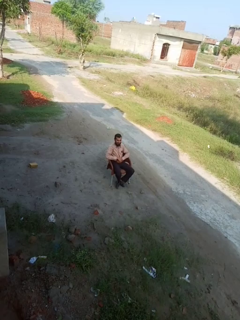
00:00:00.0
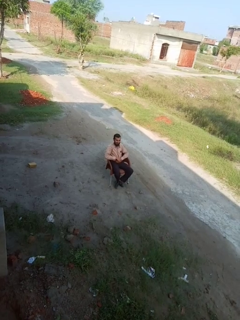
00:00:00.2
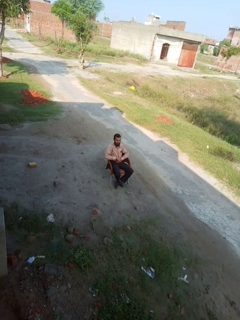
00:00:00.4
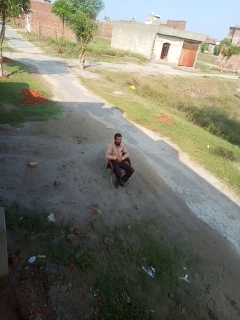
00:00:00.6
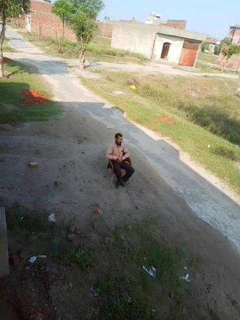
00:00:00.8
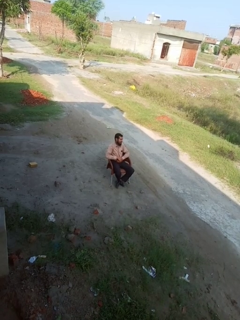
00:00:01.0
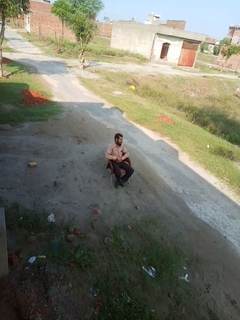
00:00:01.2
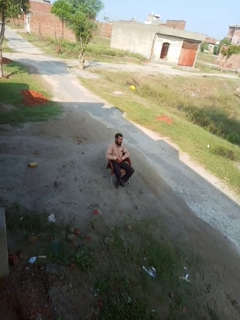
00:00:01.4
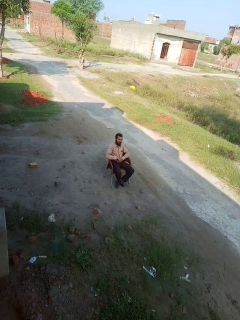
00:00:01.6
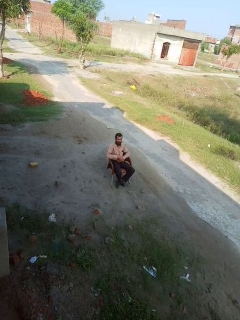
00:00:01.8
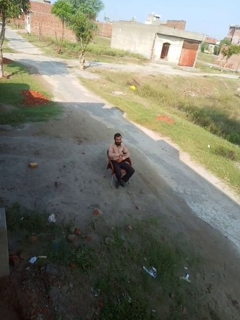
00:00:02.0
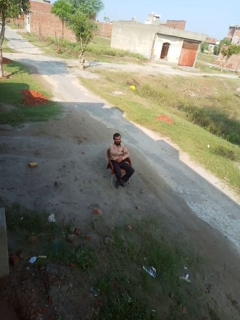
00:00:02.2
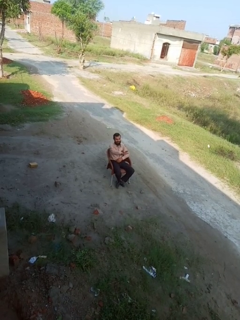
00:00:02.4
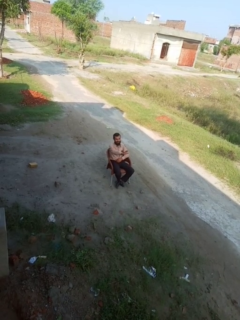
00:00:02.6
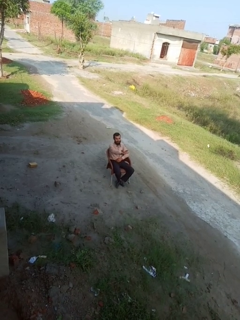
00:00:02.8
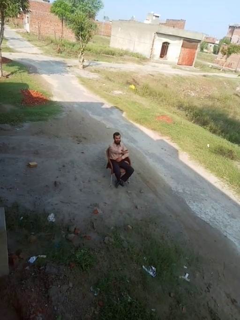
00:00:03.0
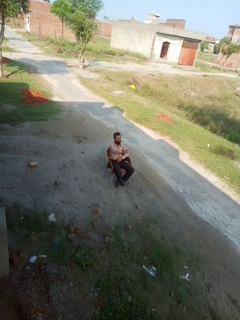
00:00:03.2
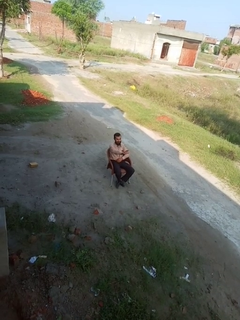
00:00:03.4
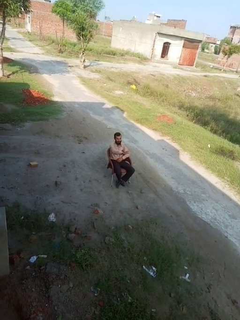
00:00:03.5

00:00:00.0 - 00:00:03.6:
person gestures stop

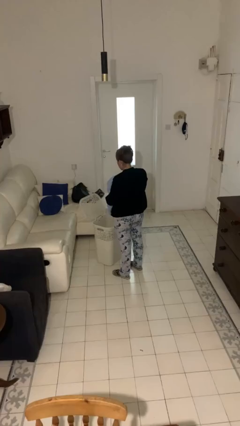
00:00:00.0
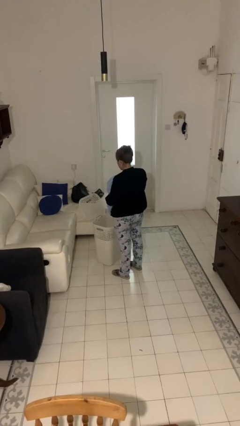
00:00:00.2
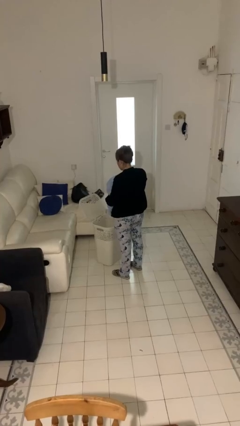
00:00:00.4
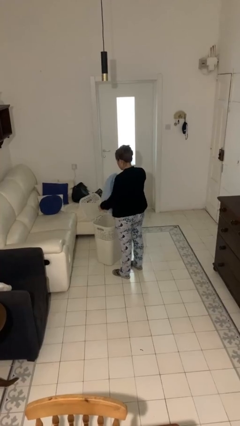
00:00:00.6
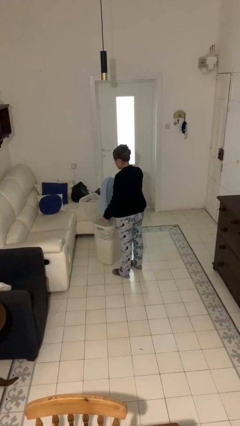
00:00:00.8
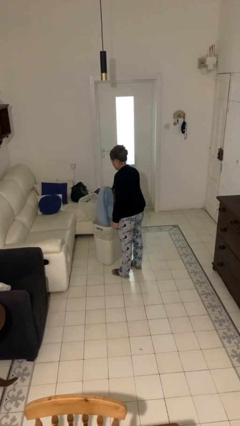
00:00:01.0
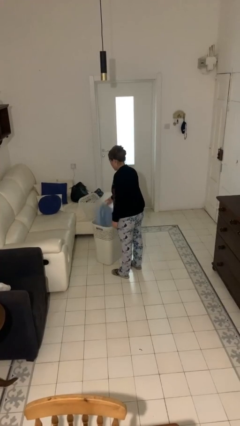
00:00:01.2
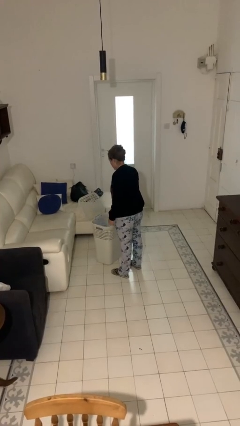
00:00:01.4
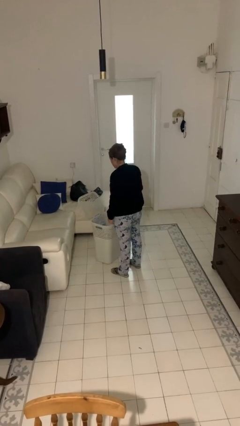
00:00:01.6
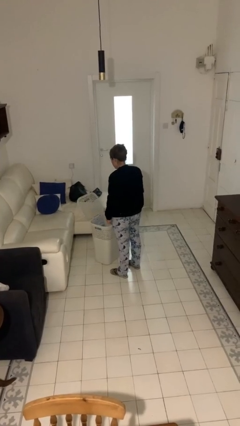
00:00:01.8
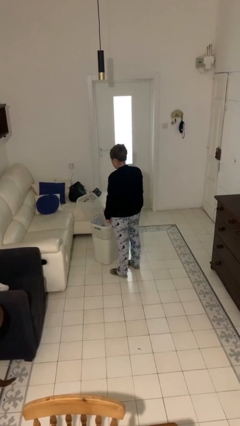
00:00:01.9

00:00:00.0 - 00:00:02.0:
person puts object into basket

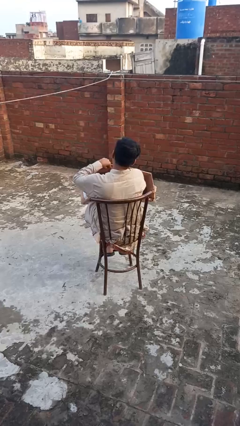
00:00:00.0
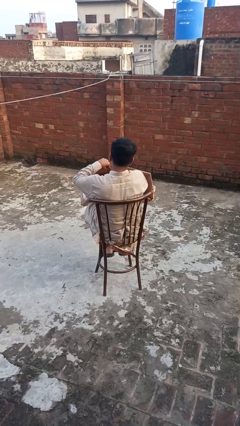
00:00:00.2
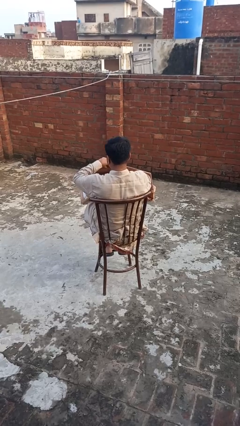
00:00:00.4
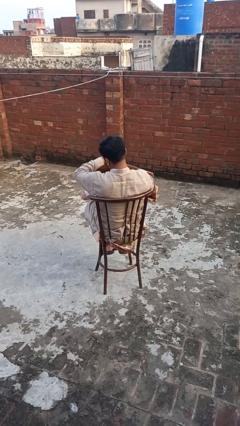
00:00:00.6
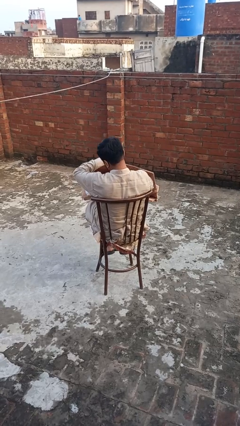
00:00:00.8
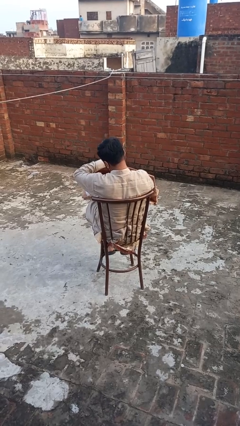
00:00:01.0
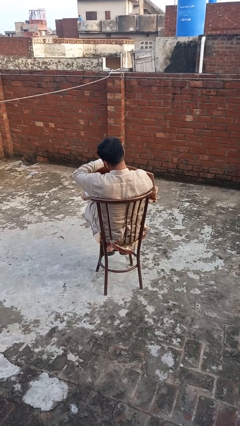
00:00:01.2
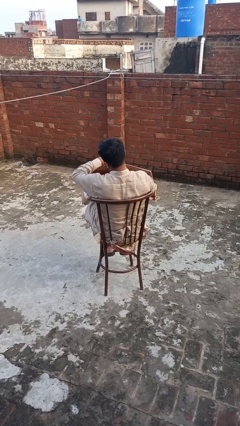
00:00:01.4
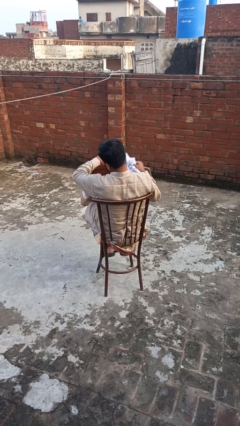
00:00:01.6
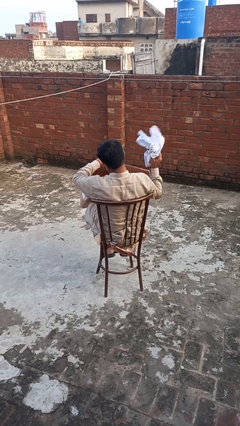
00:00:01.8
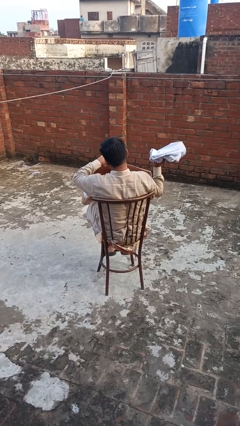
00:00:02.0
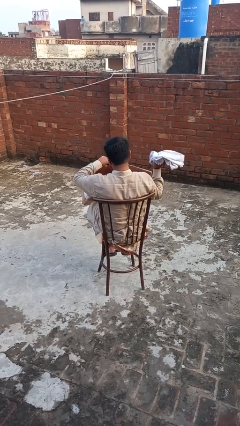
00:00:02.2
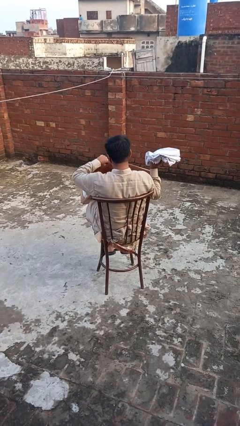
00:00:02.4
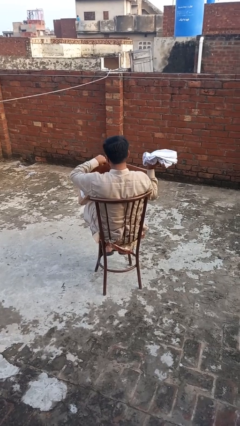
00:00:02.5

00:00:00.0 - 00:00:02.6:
person searches in box

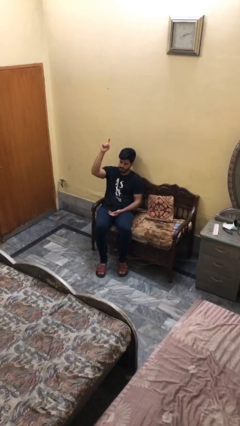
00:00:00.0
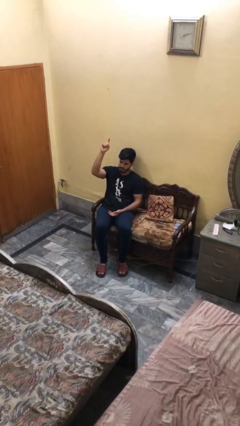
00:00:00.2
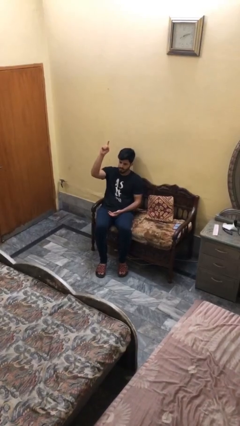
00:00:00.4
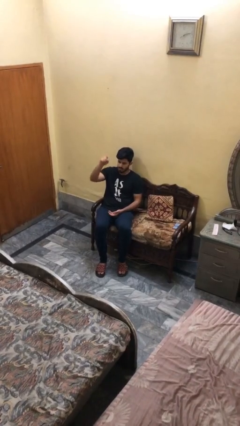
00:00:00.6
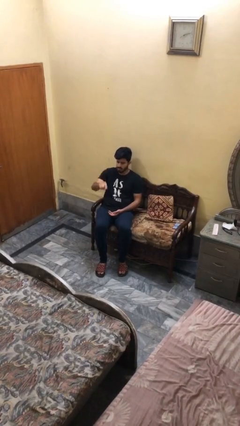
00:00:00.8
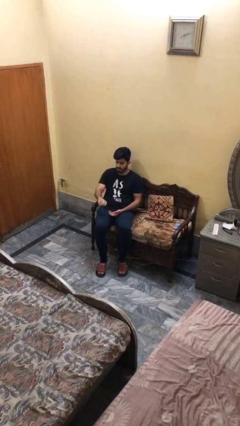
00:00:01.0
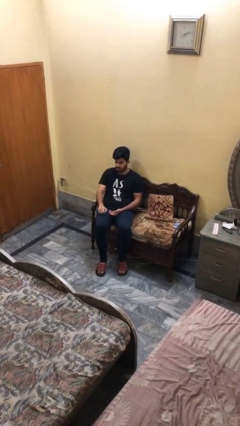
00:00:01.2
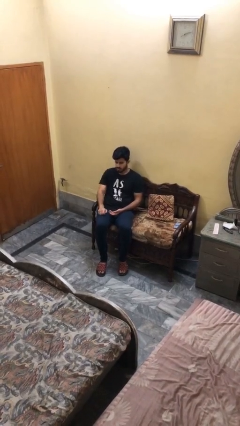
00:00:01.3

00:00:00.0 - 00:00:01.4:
person gestures lower hand

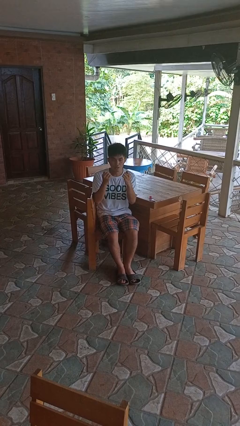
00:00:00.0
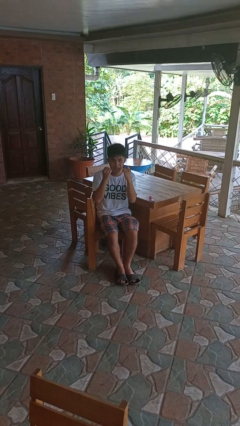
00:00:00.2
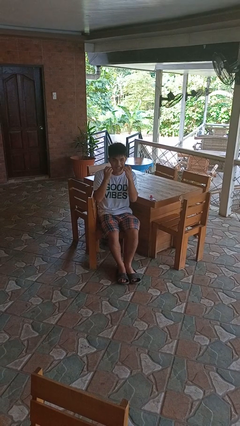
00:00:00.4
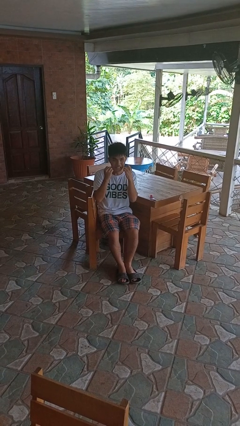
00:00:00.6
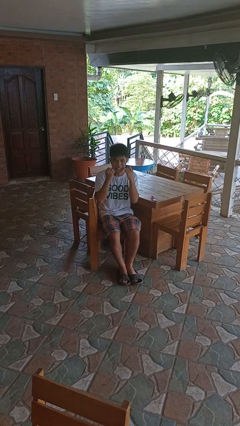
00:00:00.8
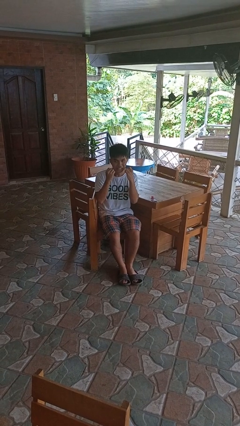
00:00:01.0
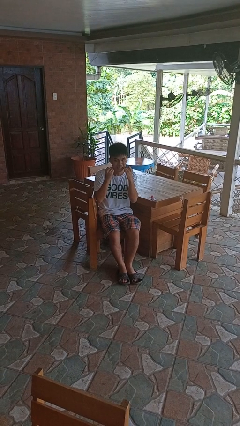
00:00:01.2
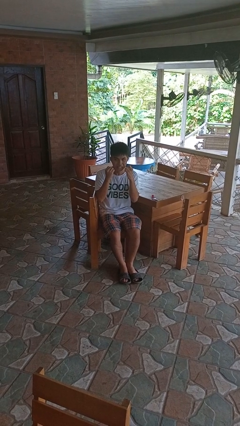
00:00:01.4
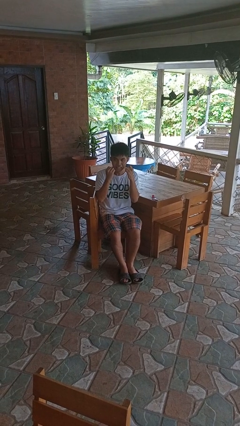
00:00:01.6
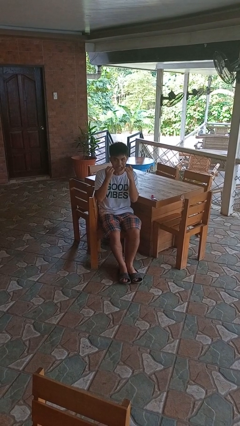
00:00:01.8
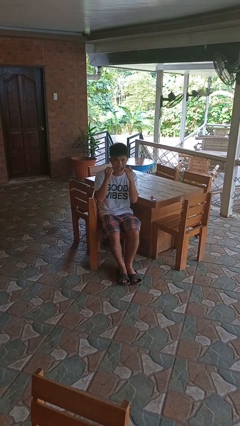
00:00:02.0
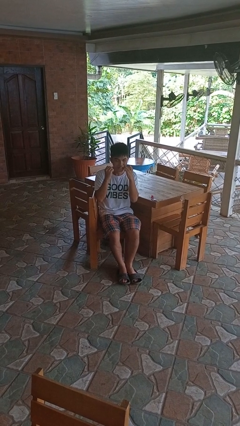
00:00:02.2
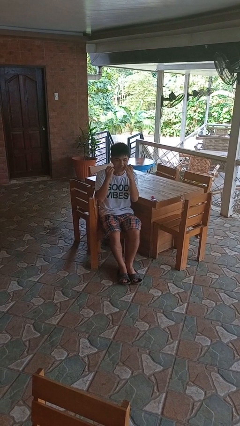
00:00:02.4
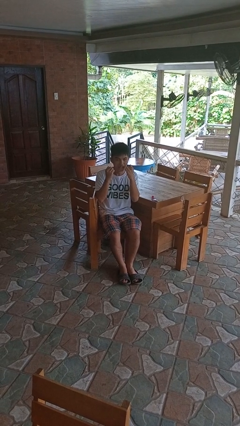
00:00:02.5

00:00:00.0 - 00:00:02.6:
person flosses

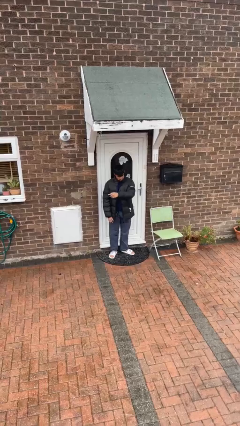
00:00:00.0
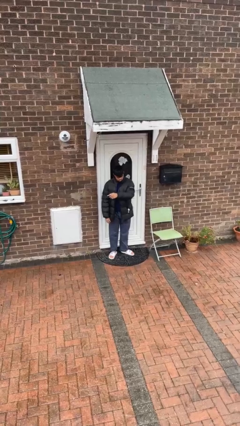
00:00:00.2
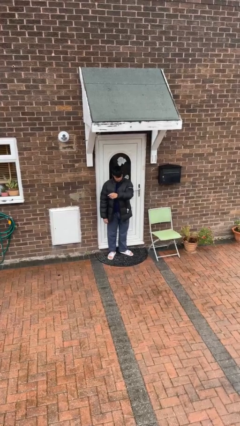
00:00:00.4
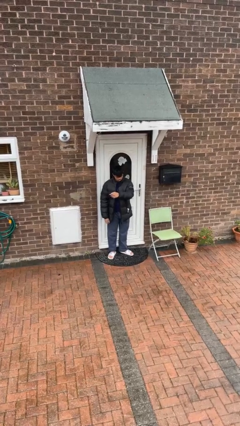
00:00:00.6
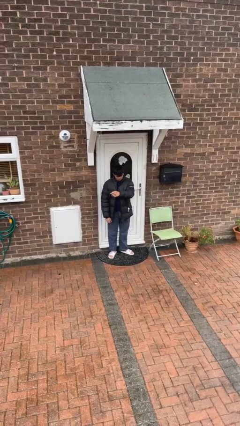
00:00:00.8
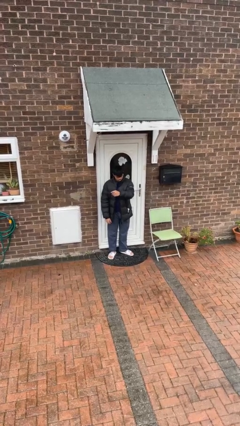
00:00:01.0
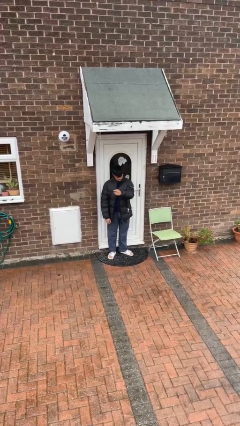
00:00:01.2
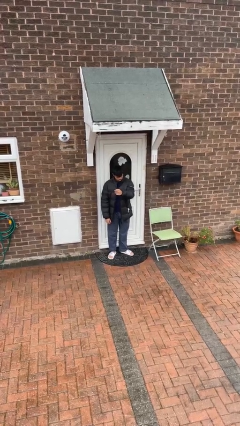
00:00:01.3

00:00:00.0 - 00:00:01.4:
person gestures swipe right

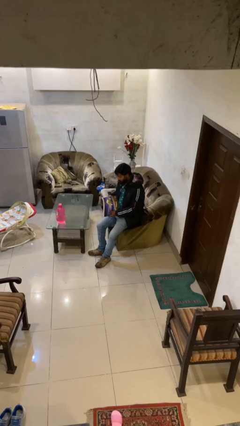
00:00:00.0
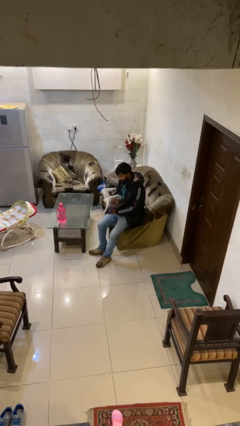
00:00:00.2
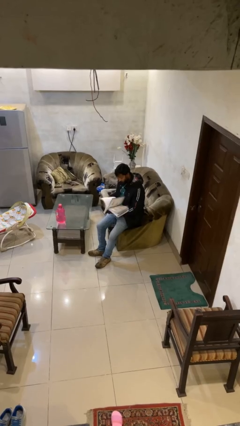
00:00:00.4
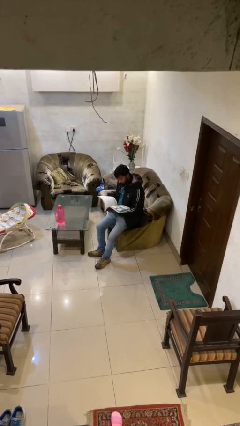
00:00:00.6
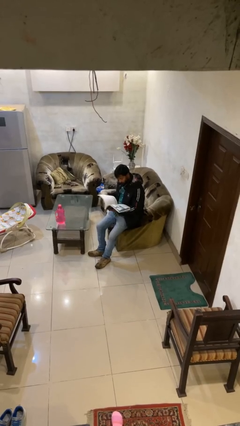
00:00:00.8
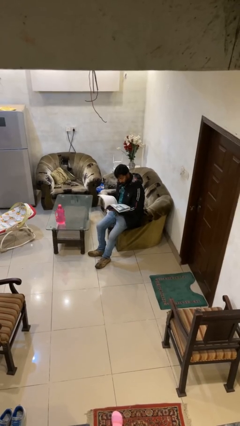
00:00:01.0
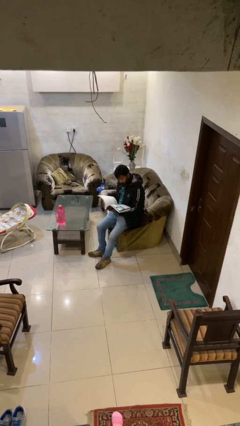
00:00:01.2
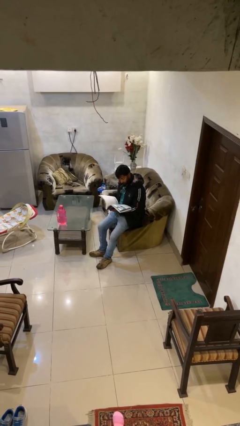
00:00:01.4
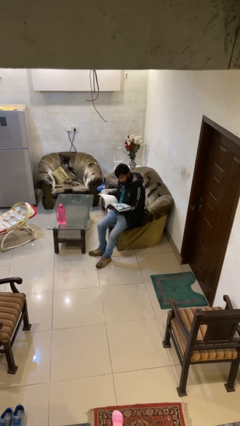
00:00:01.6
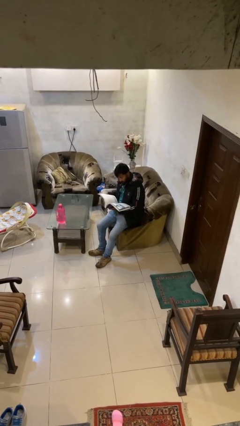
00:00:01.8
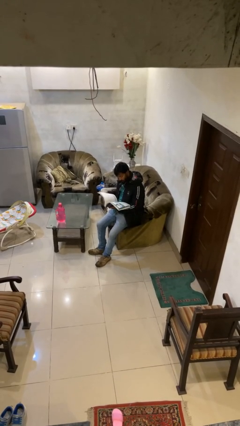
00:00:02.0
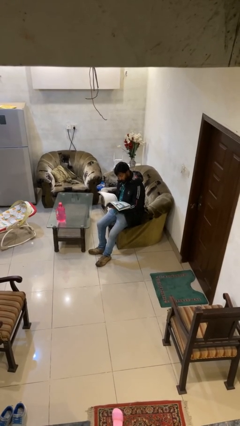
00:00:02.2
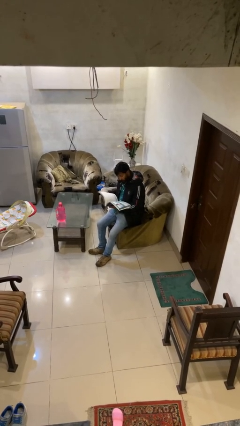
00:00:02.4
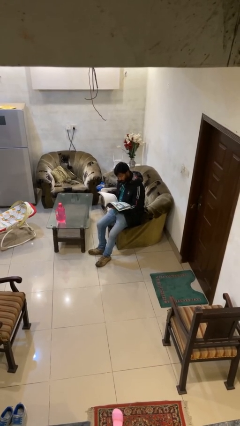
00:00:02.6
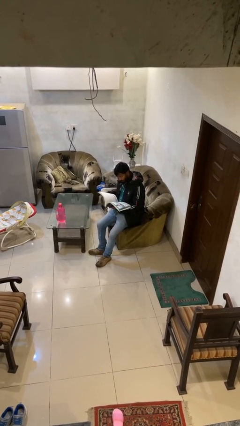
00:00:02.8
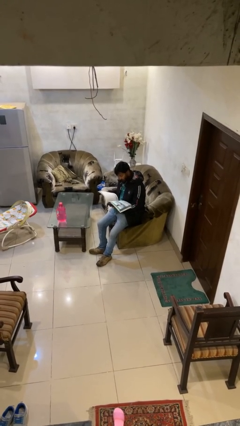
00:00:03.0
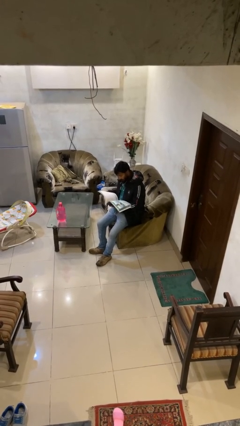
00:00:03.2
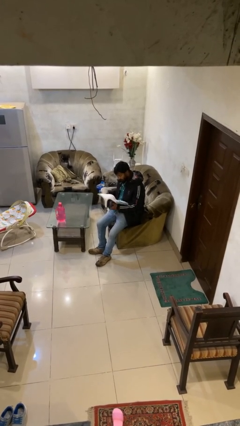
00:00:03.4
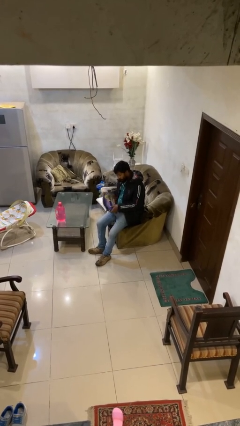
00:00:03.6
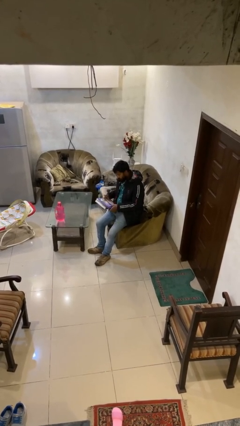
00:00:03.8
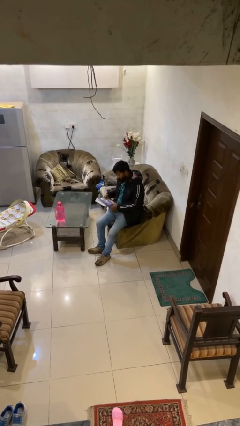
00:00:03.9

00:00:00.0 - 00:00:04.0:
person reads document

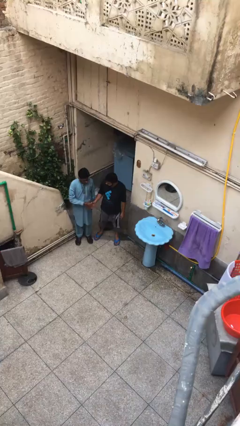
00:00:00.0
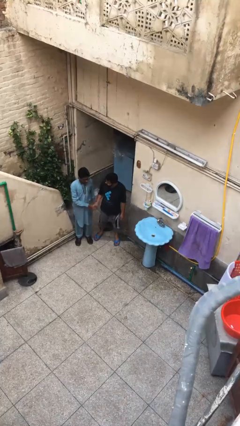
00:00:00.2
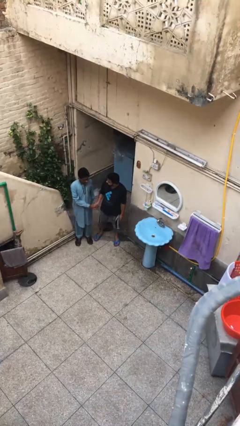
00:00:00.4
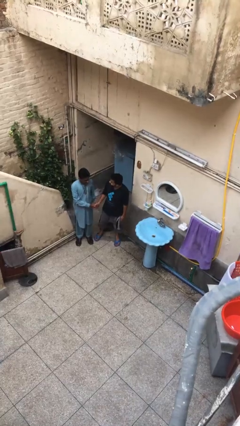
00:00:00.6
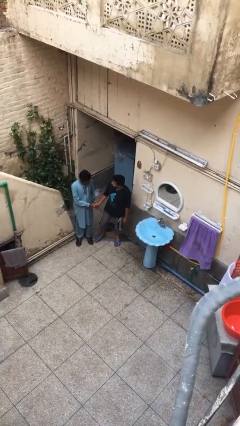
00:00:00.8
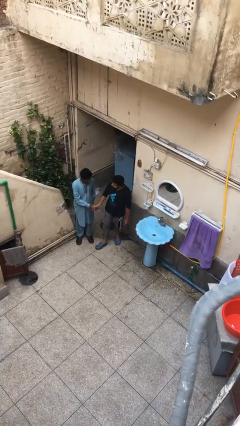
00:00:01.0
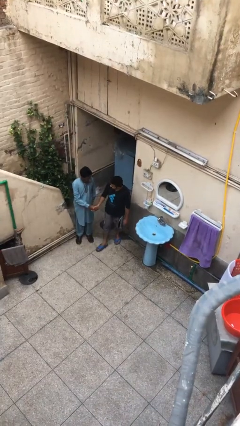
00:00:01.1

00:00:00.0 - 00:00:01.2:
person shakes hand
